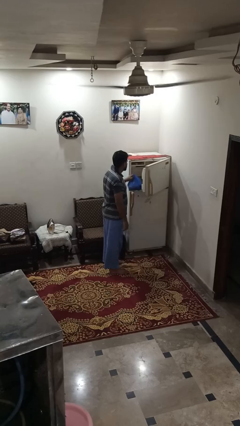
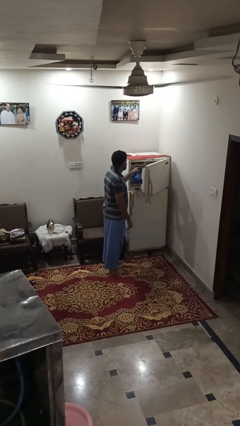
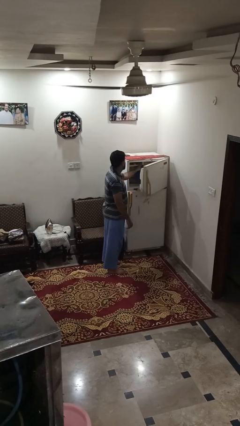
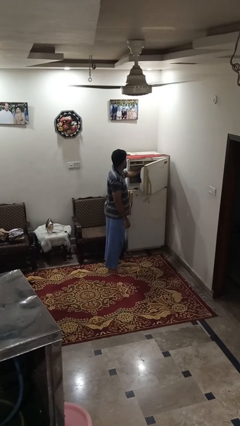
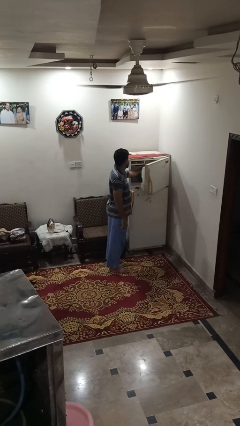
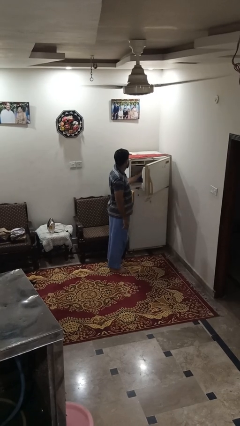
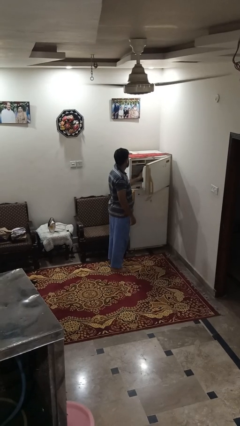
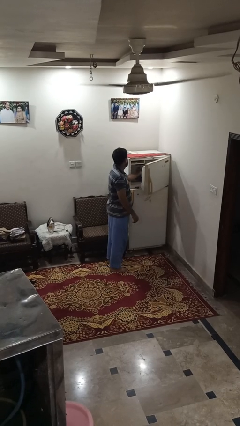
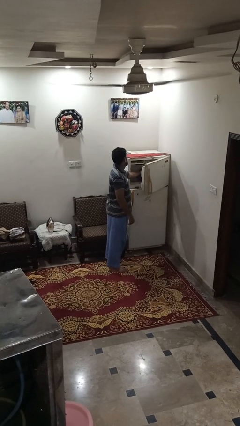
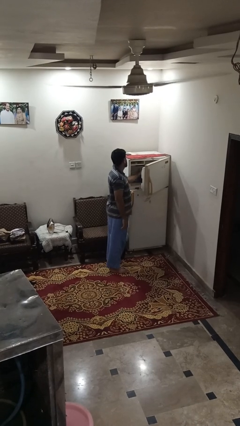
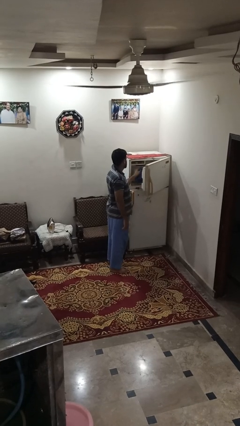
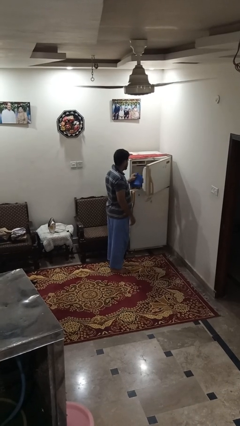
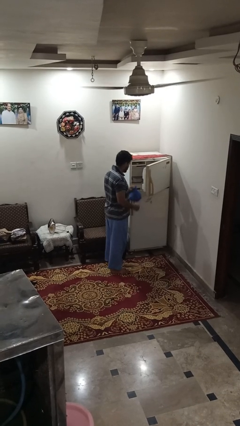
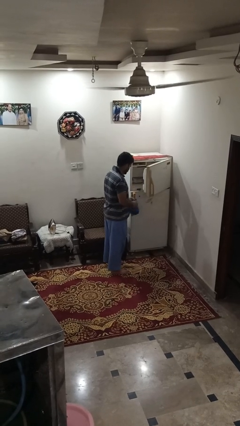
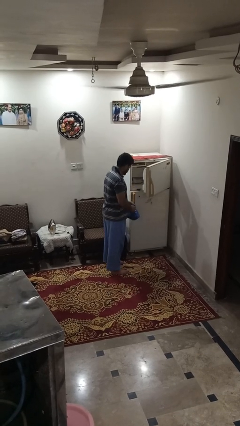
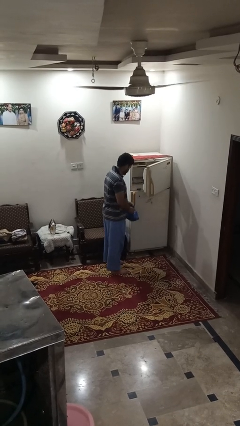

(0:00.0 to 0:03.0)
person loads groceries into refrigerator

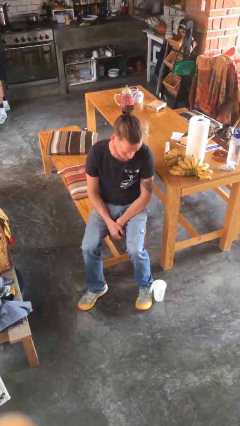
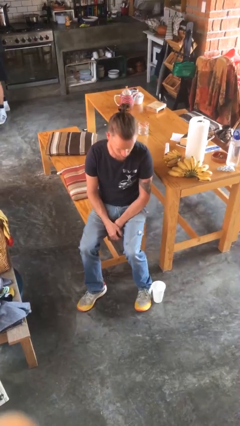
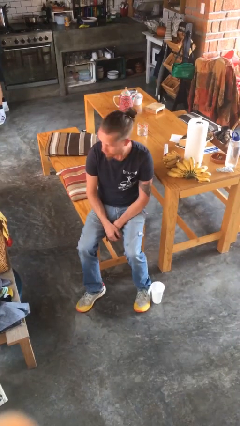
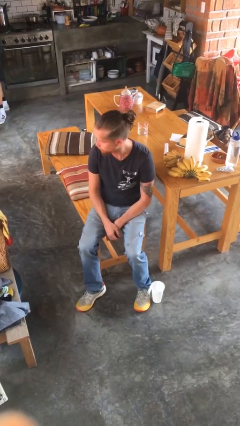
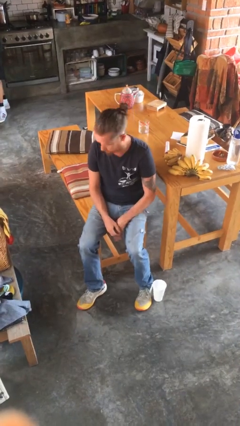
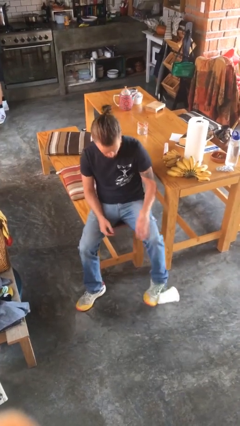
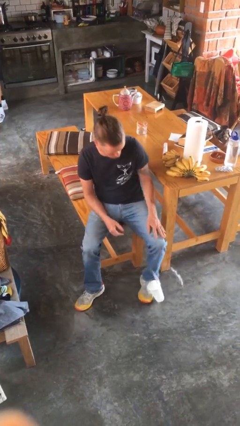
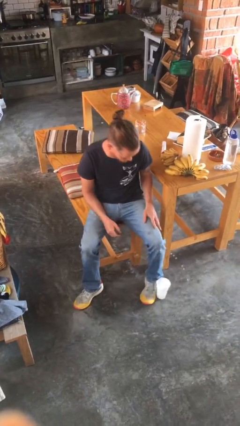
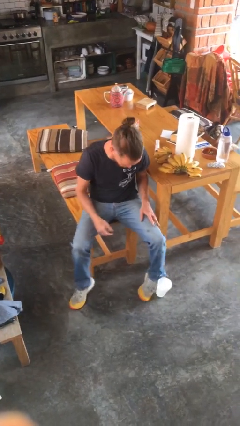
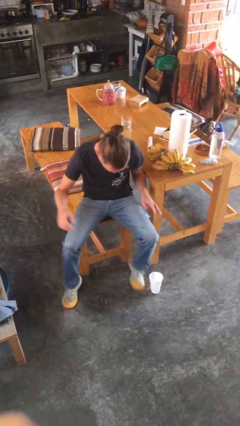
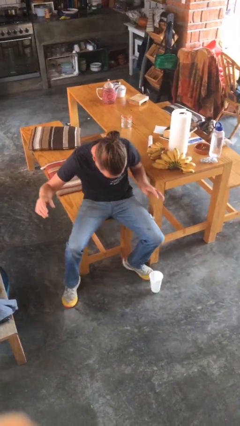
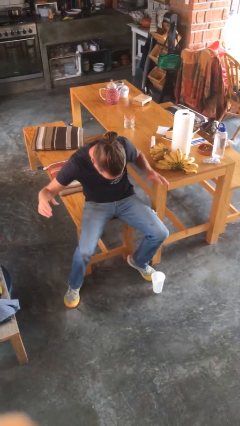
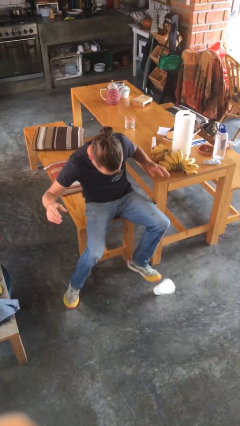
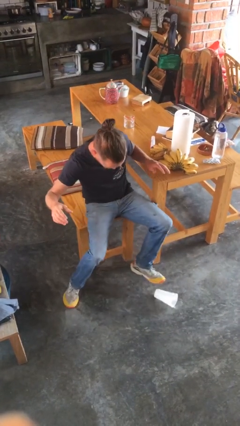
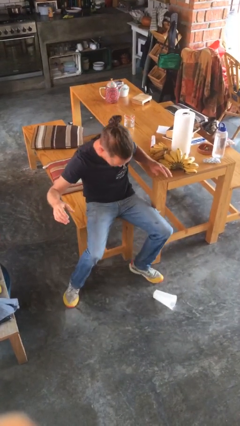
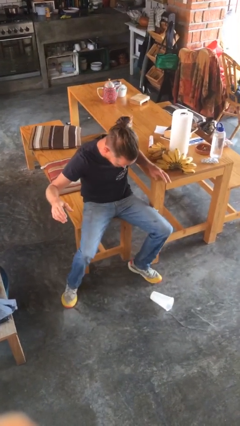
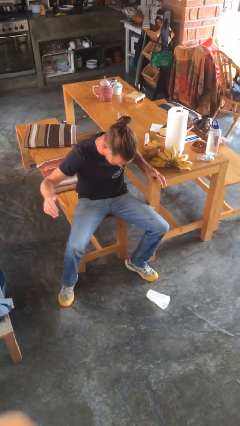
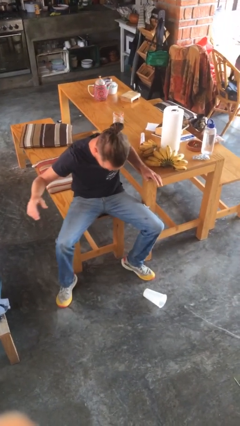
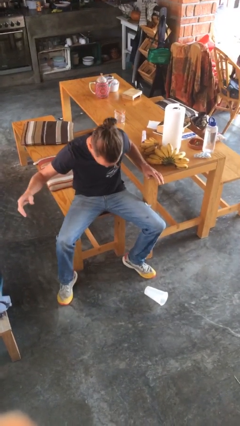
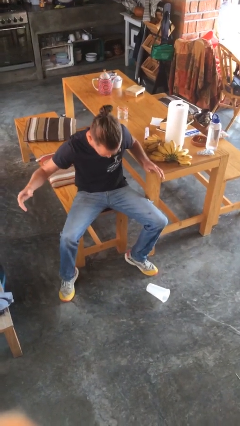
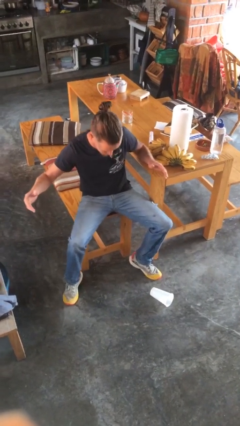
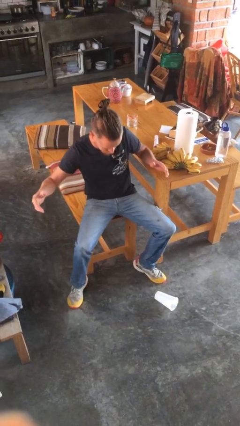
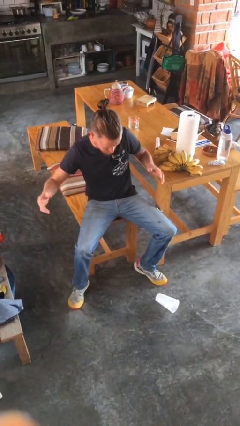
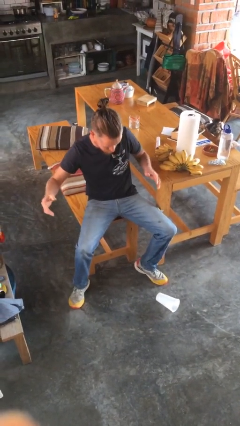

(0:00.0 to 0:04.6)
person spills on floor

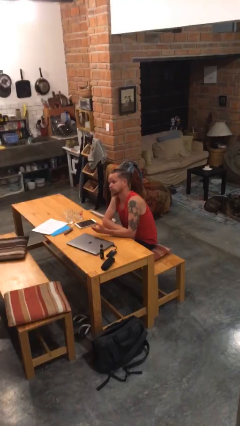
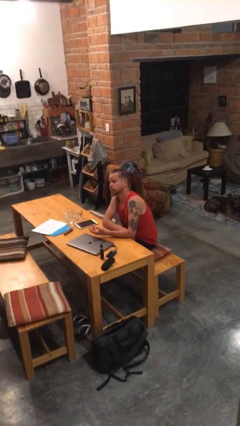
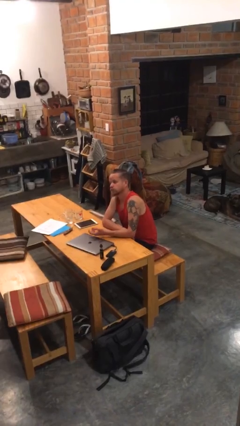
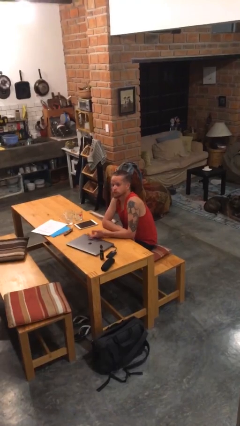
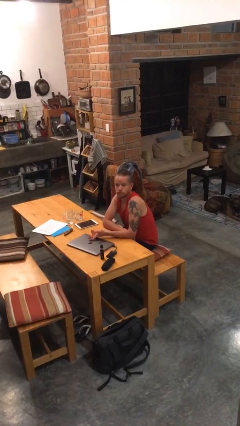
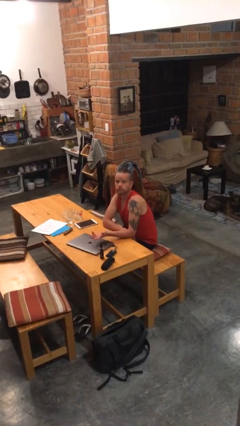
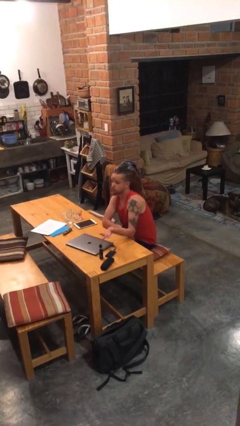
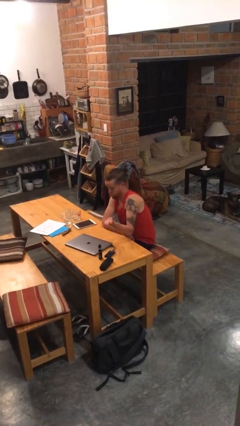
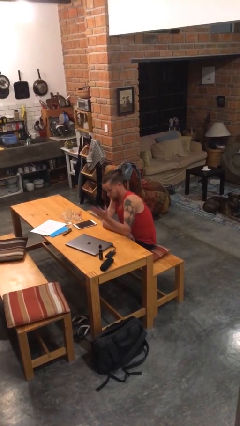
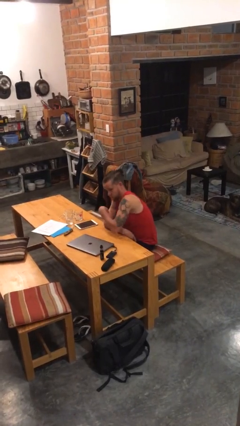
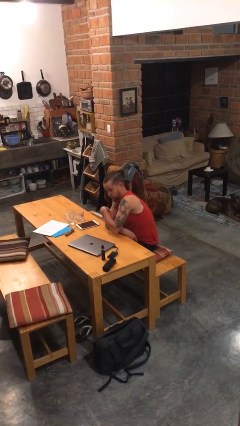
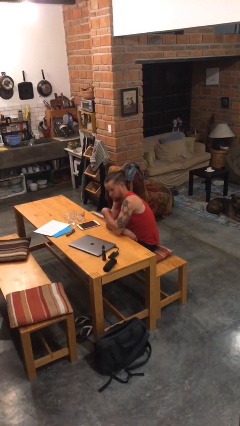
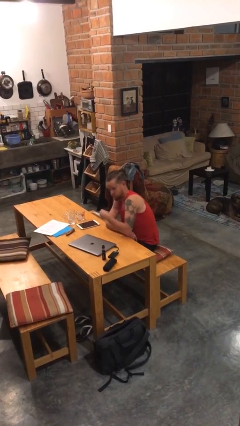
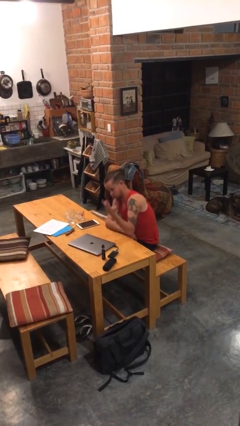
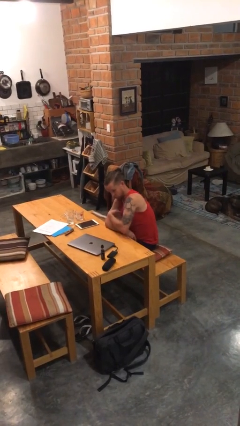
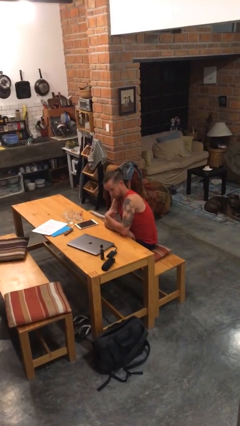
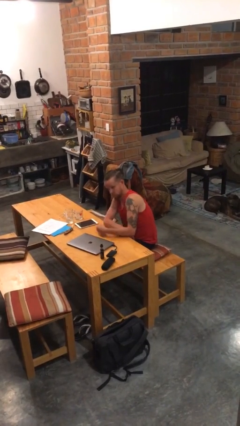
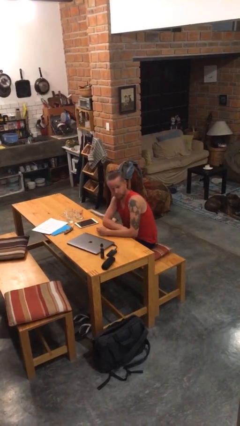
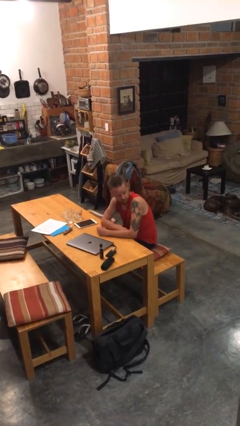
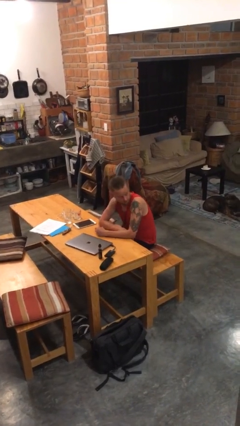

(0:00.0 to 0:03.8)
person gestures come here

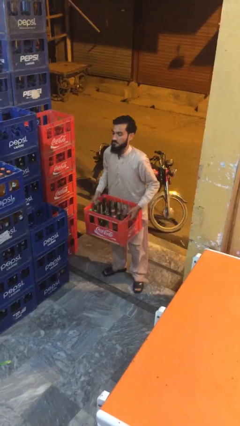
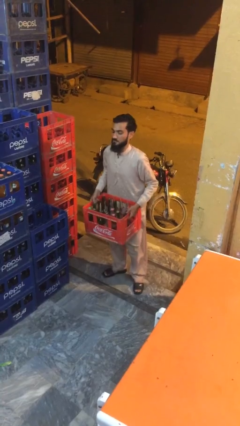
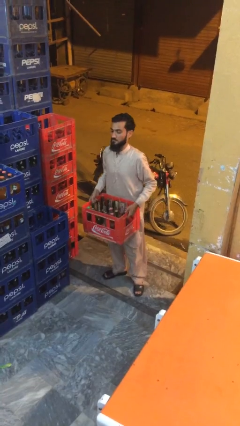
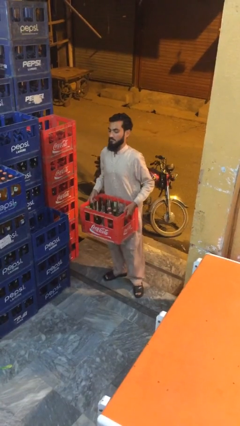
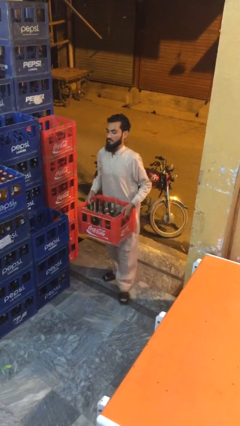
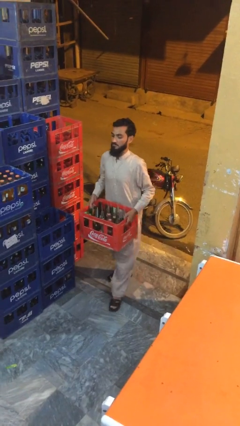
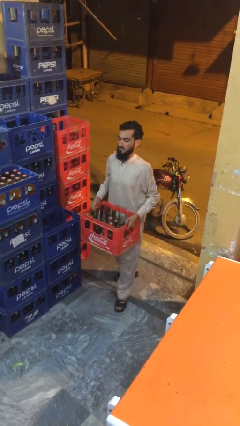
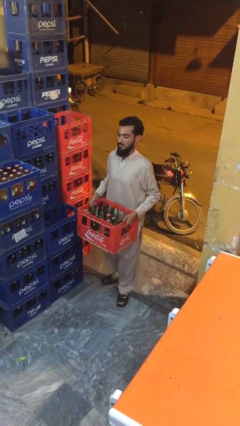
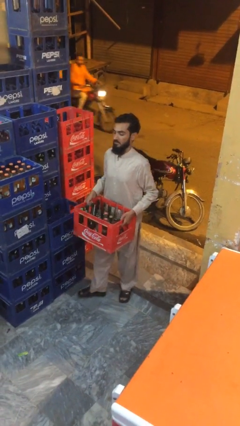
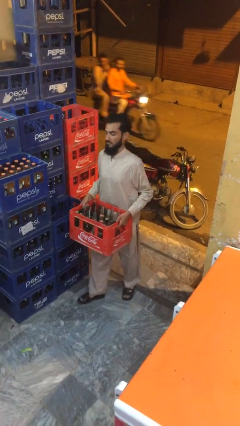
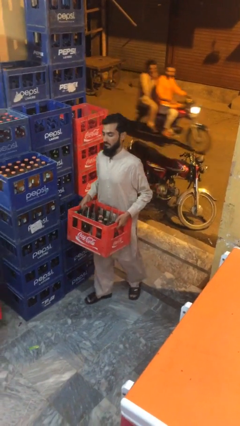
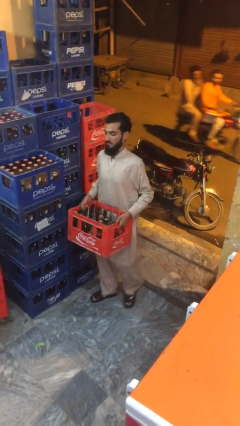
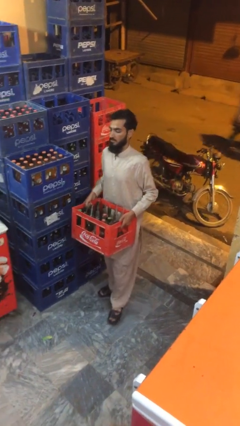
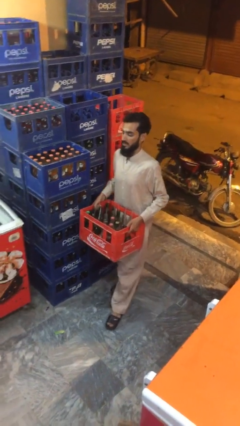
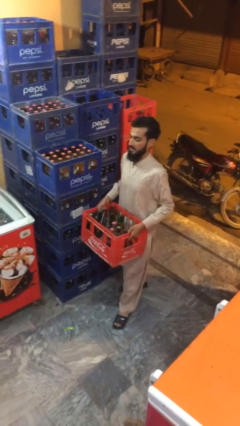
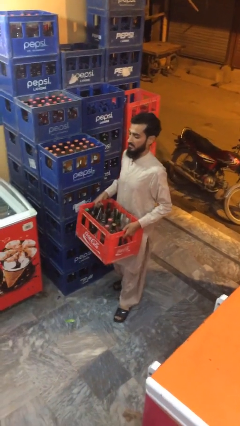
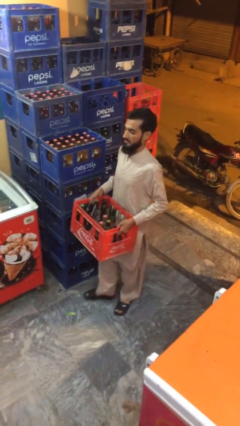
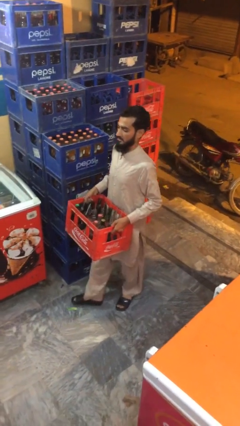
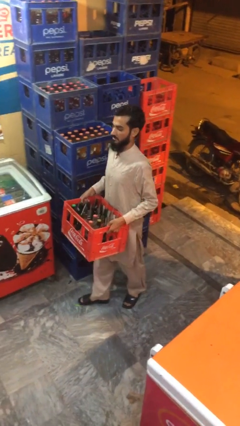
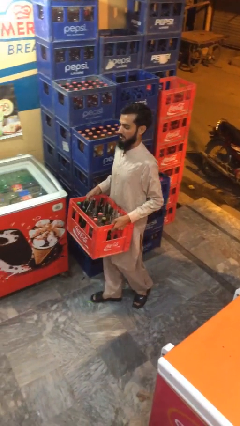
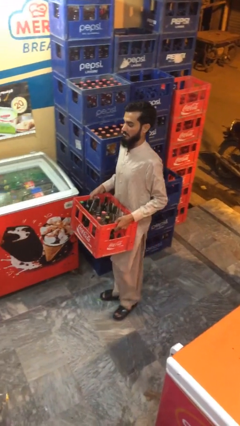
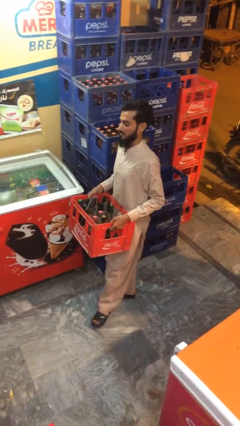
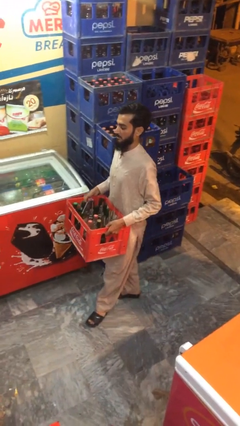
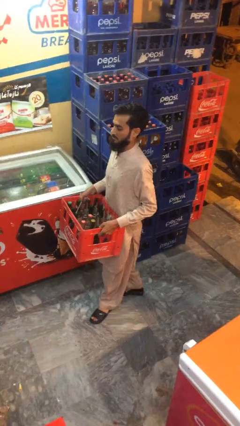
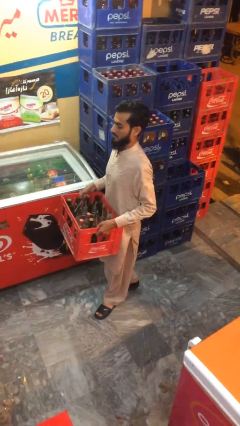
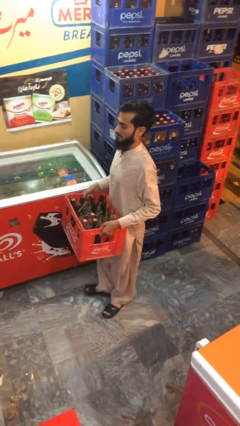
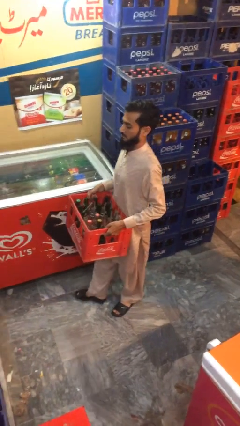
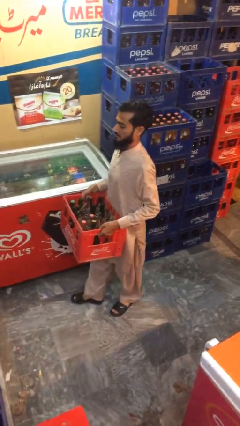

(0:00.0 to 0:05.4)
person carries heavy object

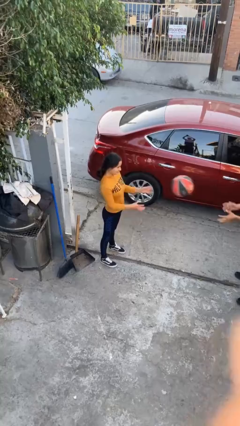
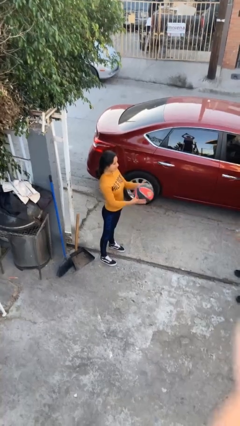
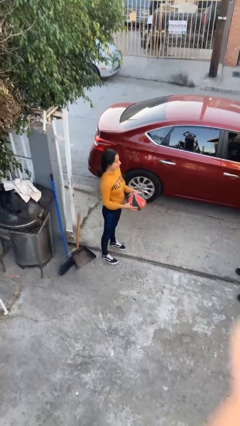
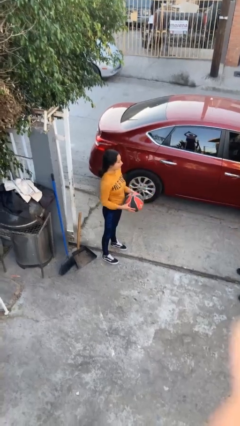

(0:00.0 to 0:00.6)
person catches object from person
